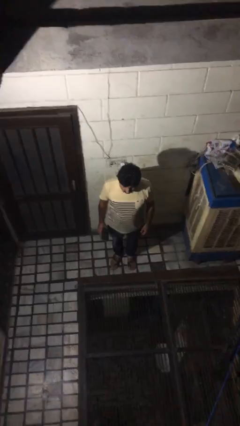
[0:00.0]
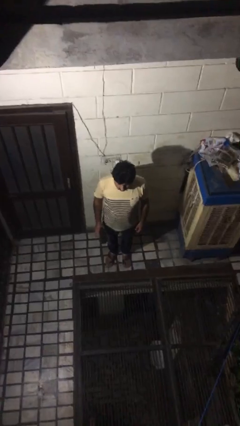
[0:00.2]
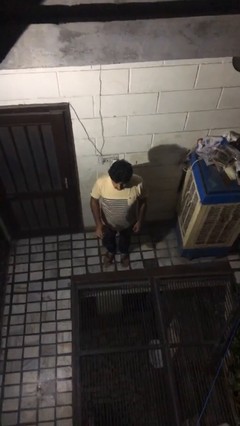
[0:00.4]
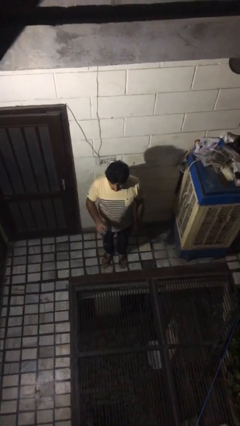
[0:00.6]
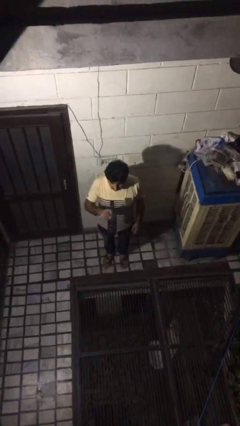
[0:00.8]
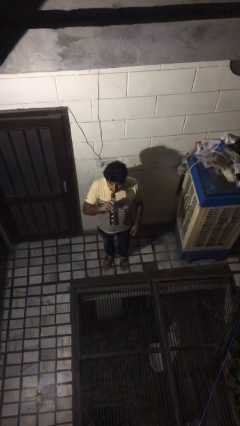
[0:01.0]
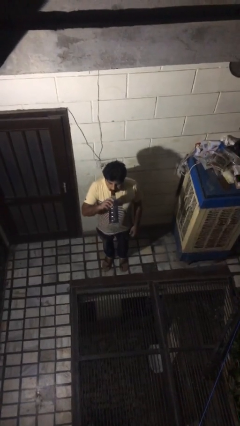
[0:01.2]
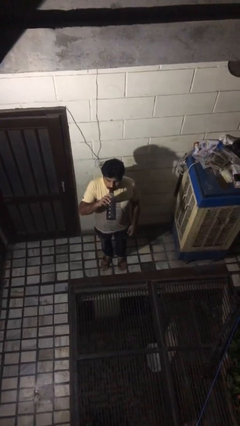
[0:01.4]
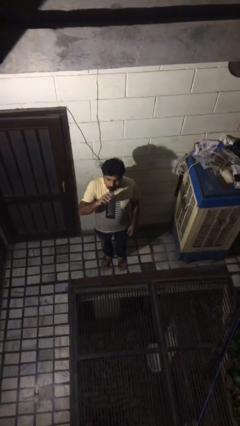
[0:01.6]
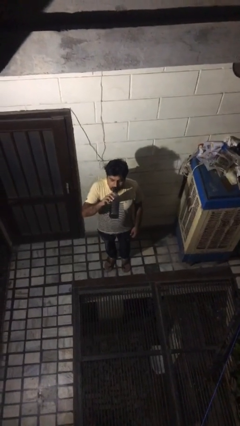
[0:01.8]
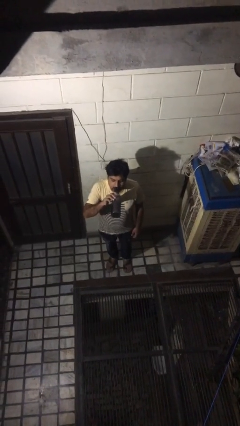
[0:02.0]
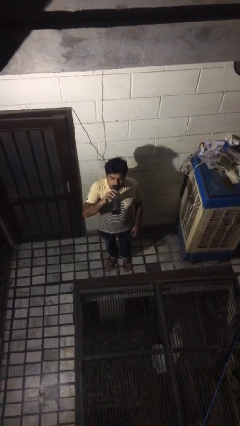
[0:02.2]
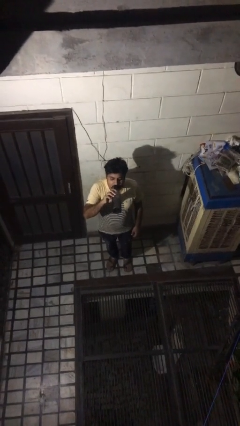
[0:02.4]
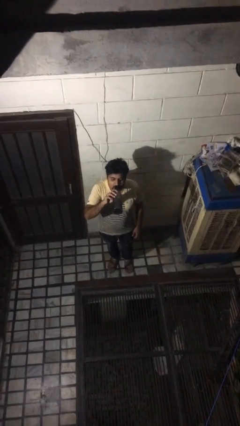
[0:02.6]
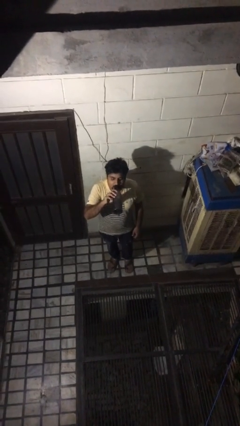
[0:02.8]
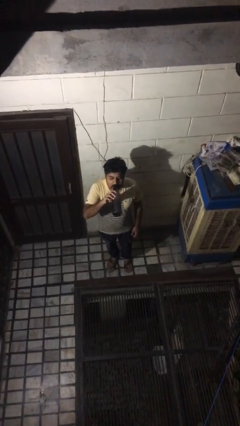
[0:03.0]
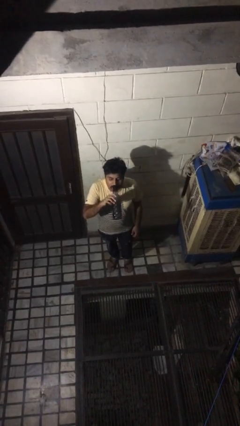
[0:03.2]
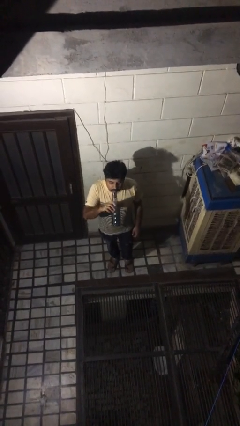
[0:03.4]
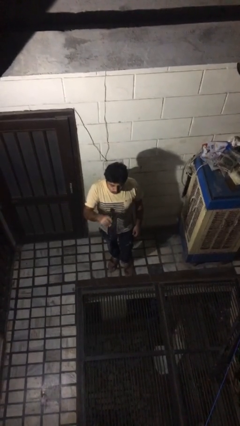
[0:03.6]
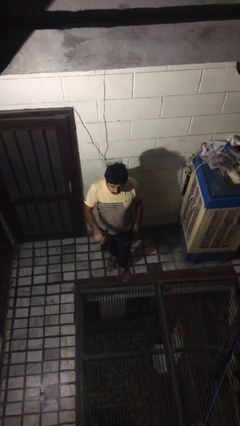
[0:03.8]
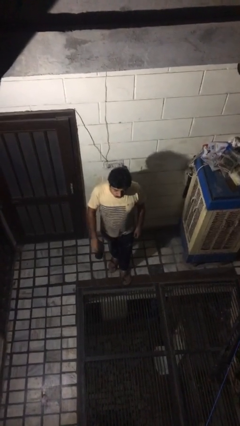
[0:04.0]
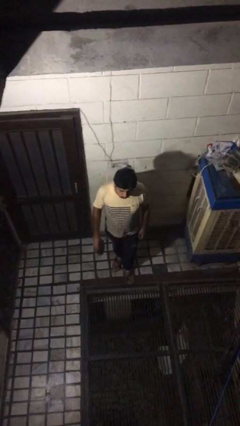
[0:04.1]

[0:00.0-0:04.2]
person drinks from bottle

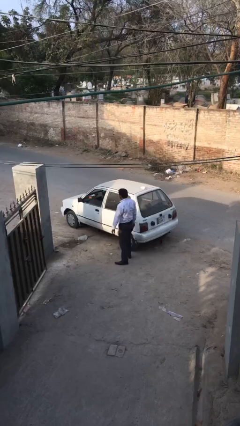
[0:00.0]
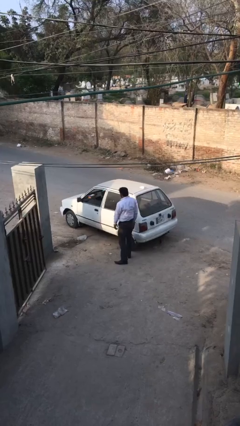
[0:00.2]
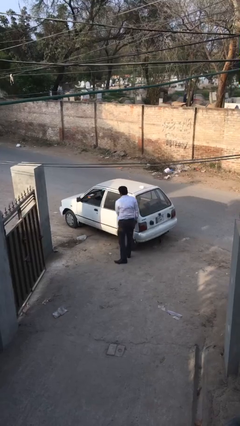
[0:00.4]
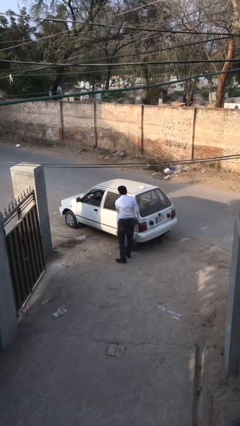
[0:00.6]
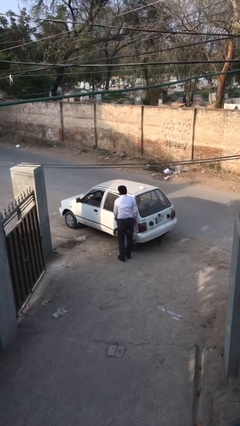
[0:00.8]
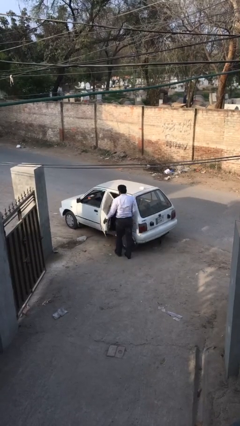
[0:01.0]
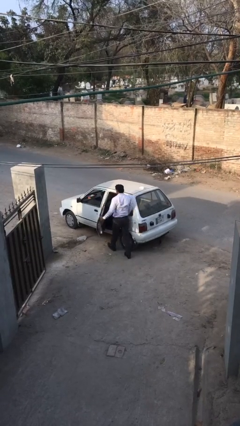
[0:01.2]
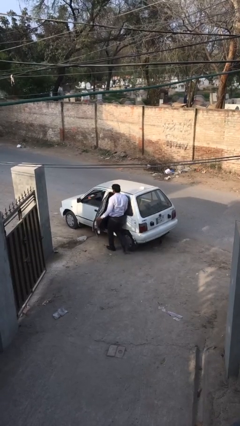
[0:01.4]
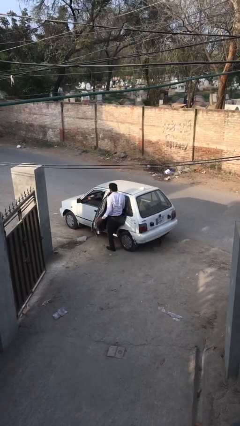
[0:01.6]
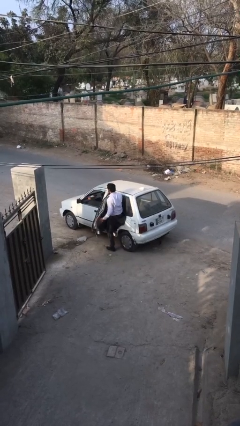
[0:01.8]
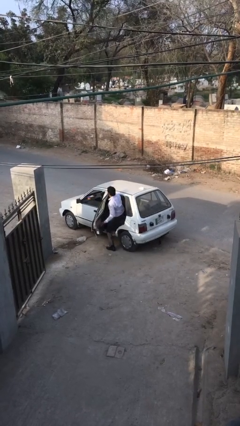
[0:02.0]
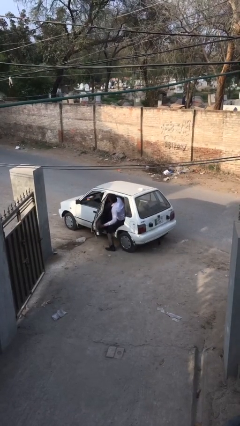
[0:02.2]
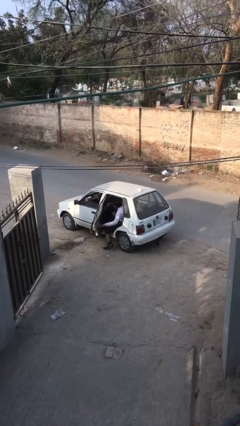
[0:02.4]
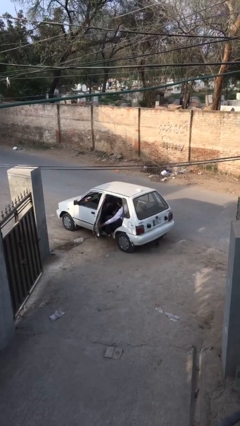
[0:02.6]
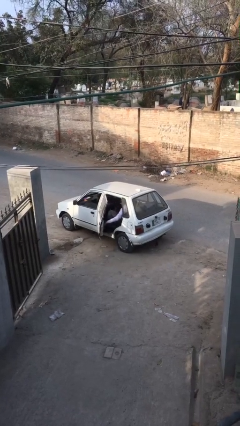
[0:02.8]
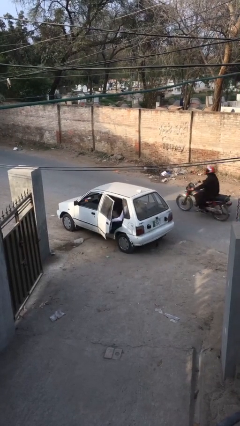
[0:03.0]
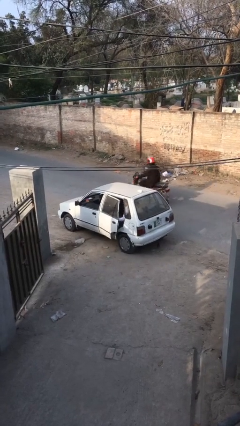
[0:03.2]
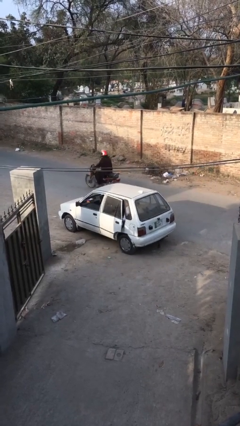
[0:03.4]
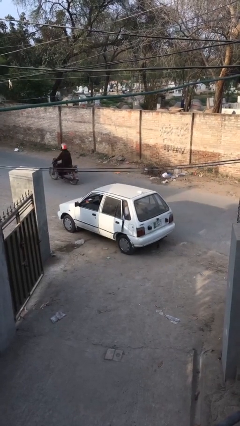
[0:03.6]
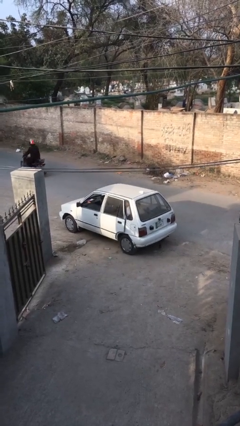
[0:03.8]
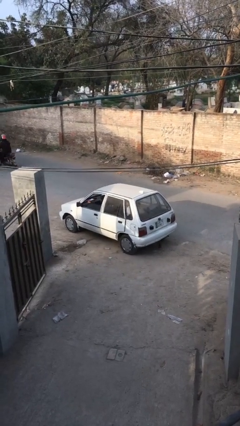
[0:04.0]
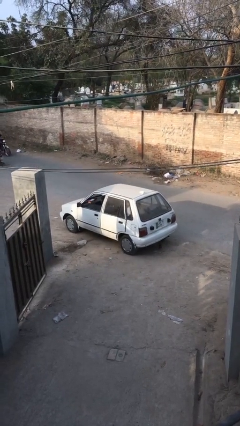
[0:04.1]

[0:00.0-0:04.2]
car picks up person

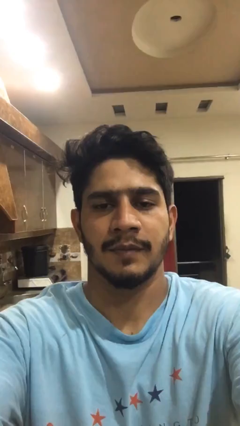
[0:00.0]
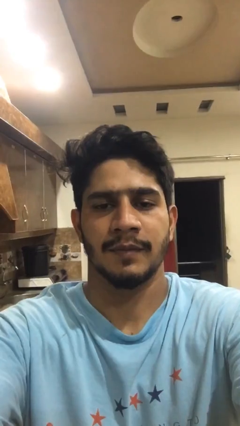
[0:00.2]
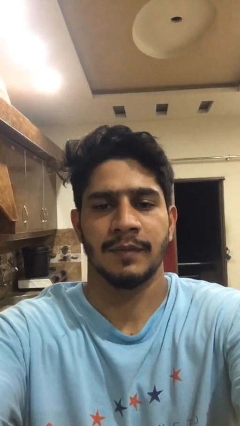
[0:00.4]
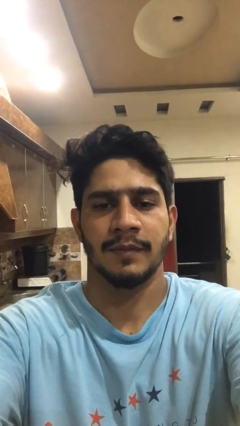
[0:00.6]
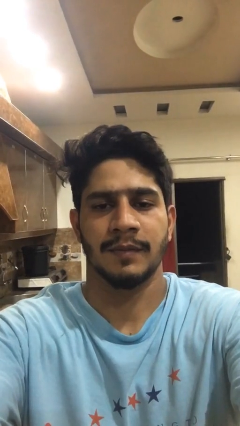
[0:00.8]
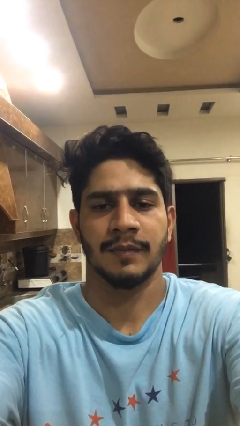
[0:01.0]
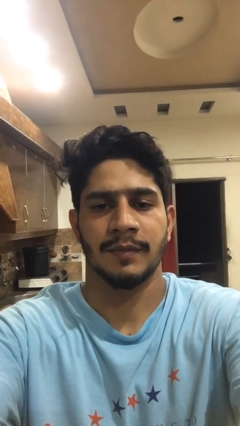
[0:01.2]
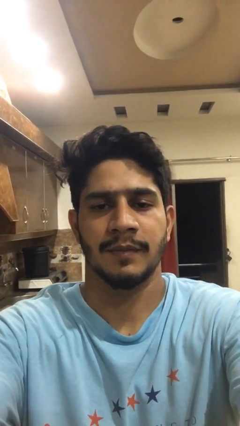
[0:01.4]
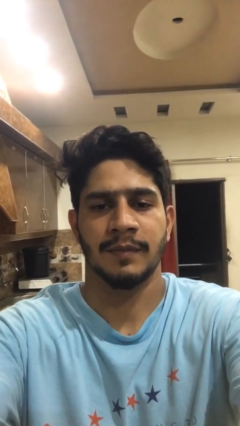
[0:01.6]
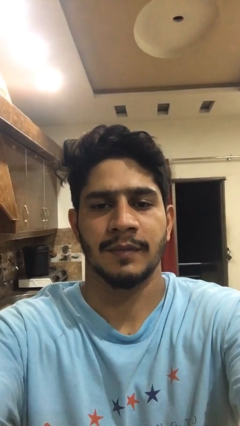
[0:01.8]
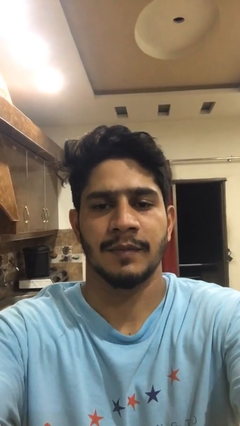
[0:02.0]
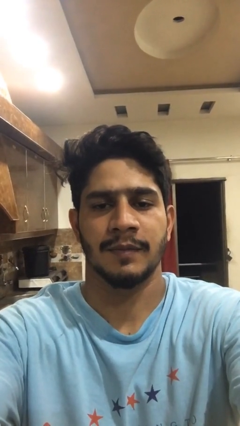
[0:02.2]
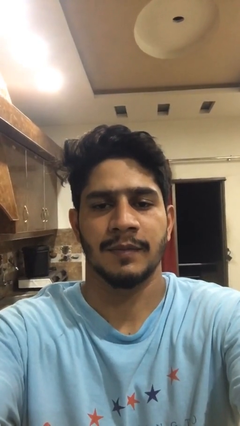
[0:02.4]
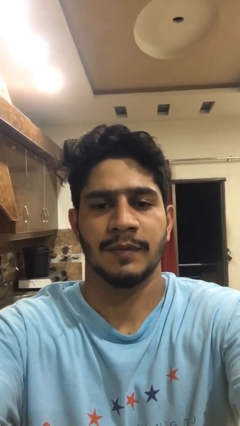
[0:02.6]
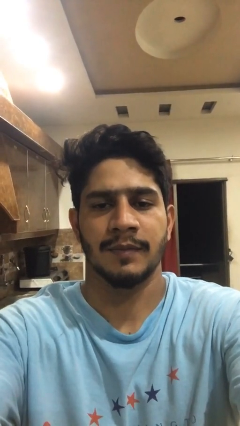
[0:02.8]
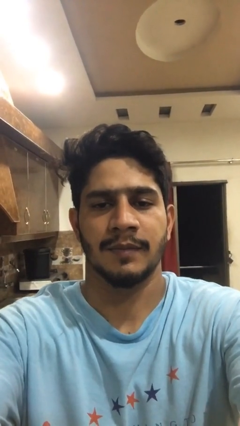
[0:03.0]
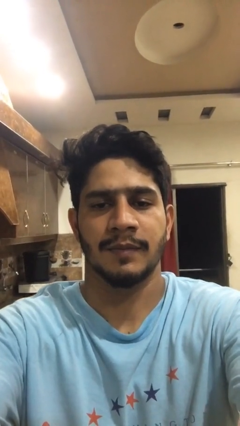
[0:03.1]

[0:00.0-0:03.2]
person takes selfie

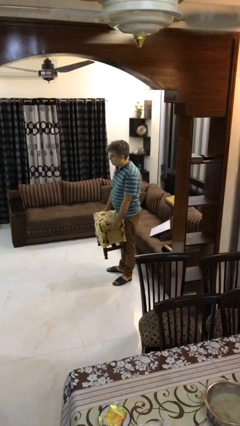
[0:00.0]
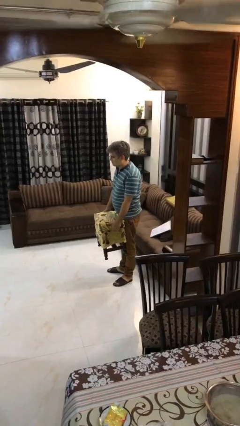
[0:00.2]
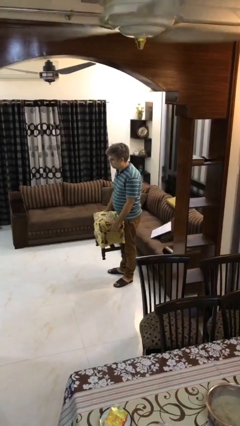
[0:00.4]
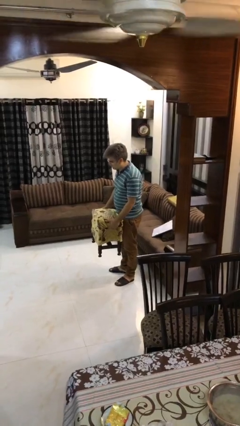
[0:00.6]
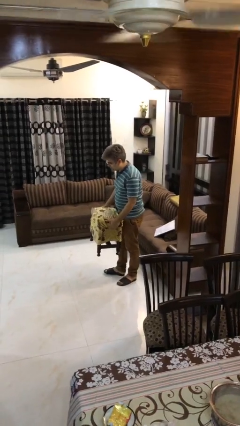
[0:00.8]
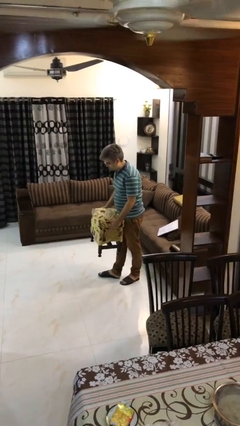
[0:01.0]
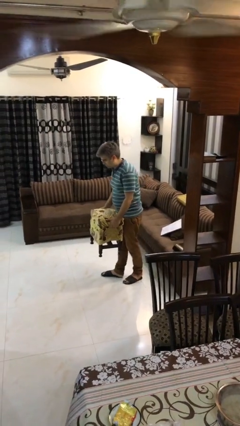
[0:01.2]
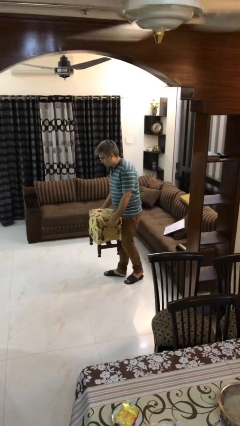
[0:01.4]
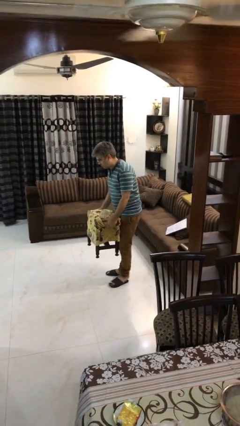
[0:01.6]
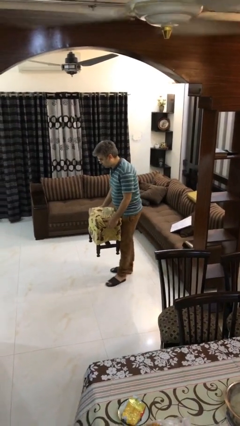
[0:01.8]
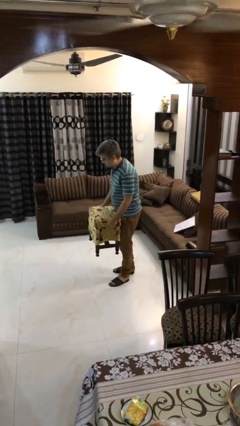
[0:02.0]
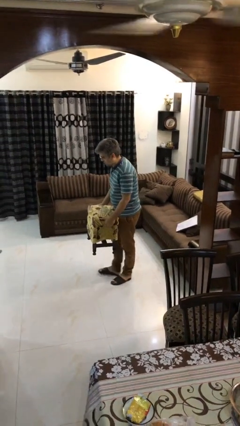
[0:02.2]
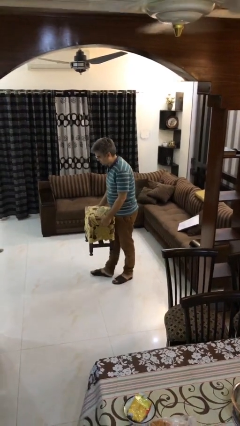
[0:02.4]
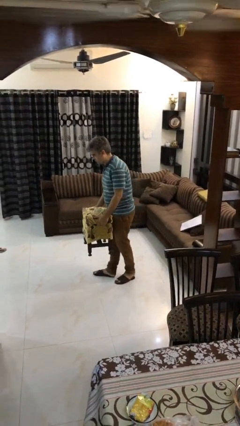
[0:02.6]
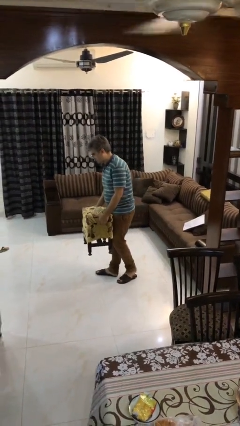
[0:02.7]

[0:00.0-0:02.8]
person carries heavy object

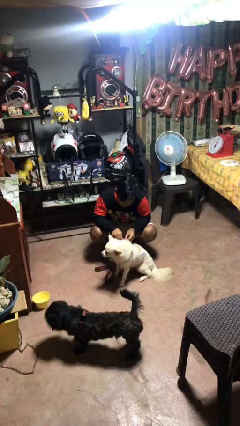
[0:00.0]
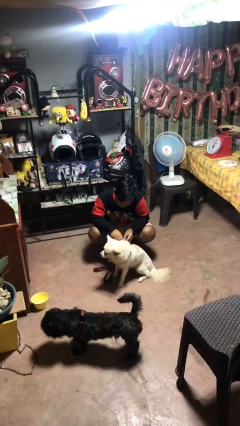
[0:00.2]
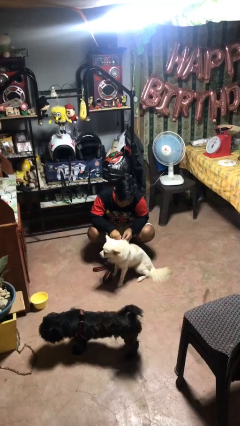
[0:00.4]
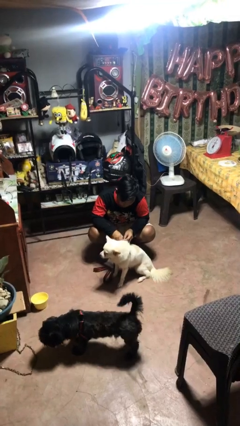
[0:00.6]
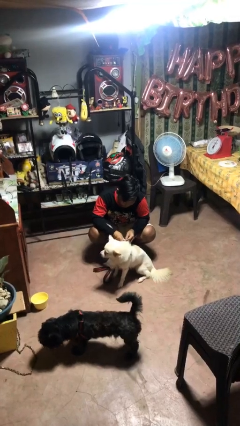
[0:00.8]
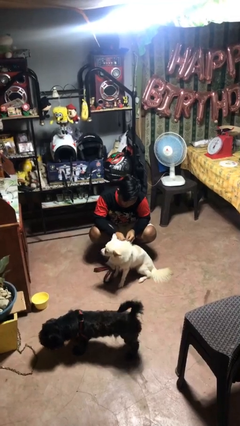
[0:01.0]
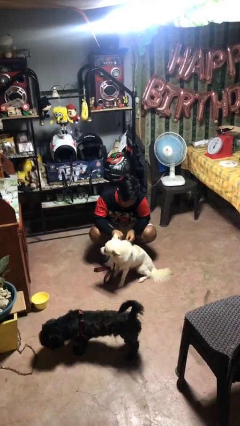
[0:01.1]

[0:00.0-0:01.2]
person unattaches leash from dog

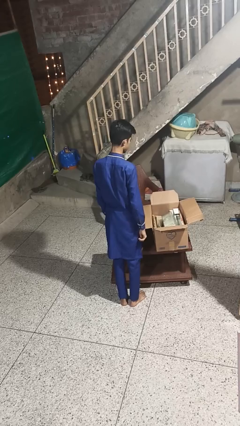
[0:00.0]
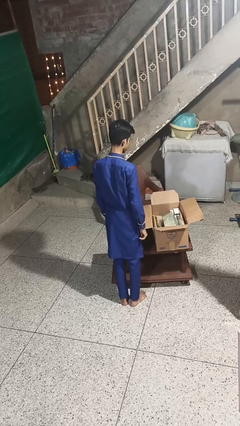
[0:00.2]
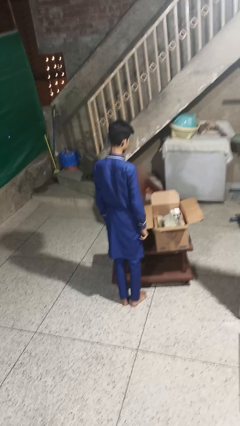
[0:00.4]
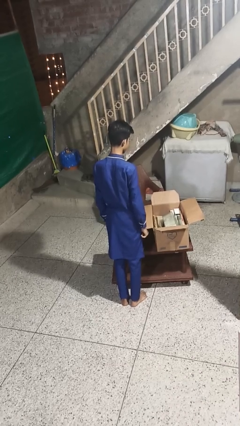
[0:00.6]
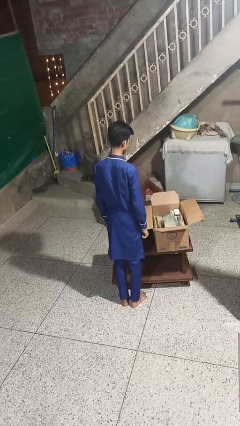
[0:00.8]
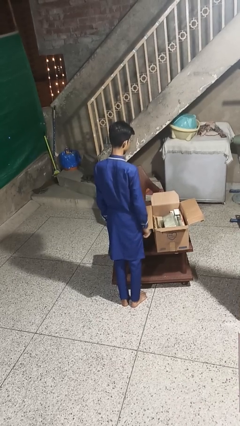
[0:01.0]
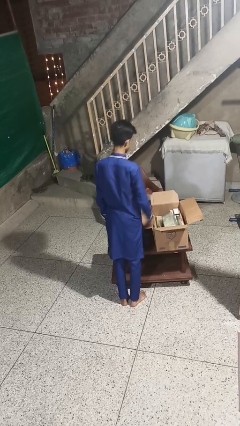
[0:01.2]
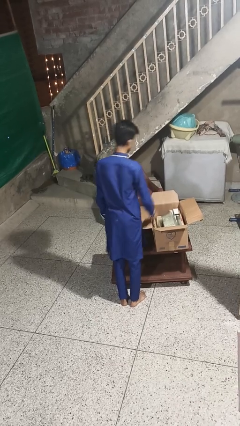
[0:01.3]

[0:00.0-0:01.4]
person takes object from box
